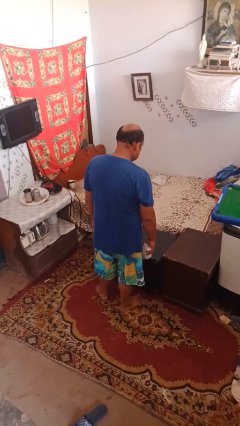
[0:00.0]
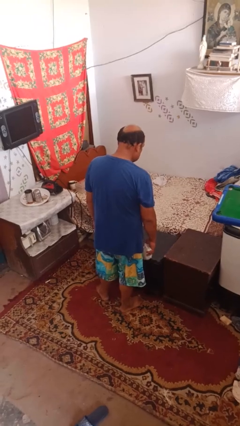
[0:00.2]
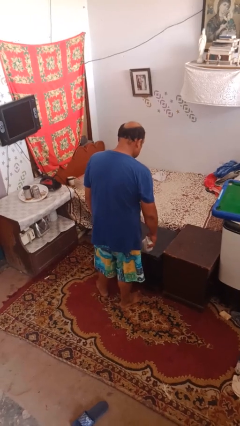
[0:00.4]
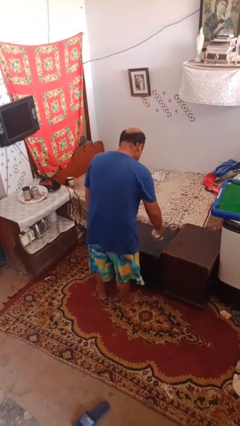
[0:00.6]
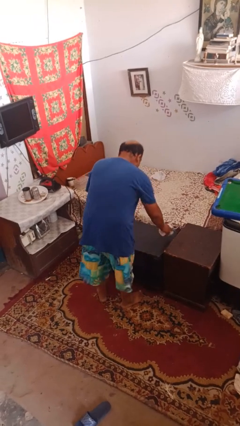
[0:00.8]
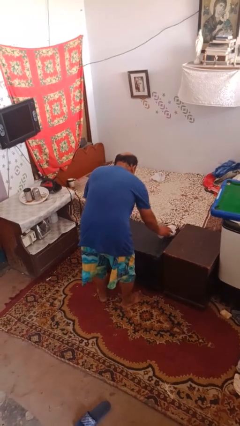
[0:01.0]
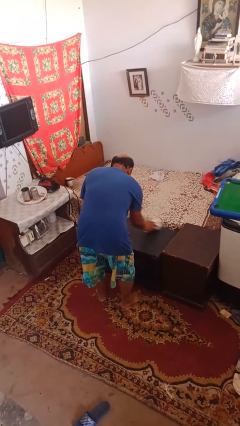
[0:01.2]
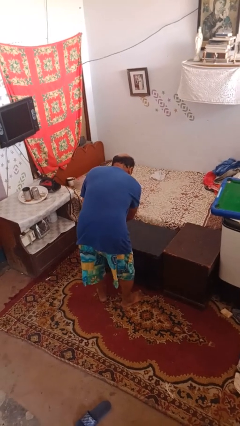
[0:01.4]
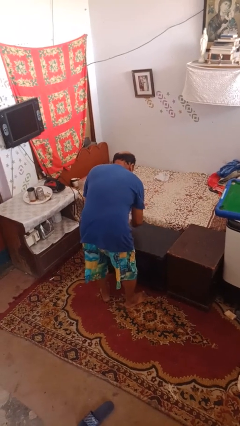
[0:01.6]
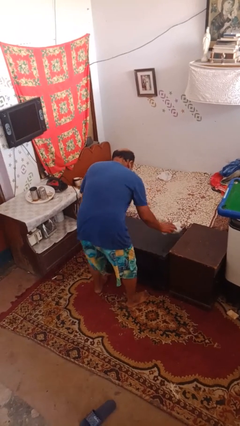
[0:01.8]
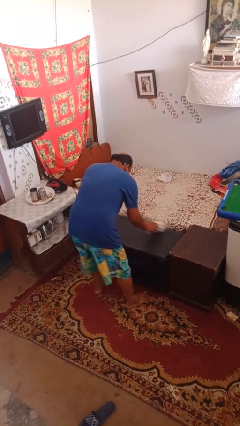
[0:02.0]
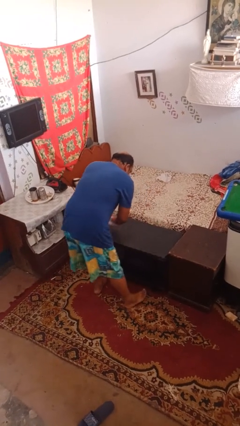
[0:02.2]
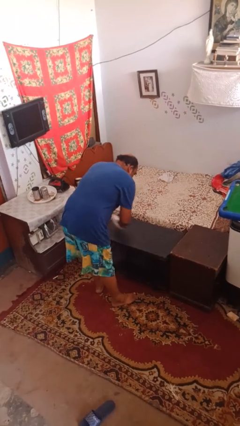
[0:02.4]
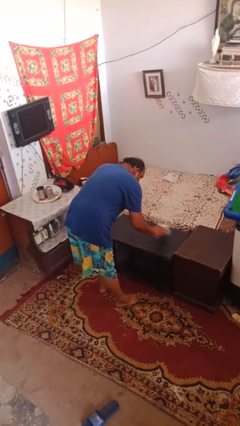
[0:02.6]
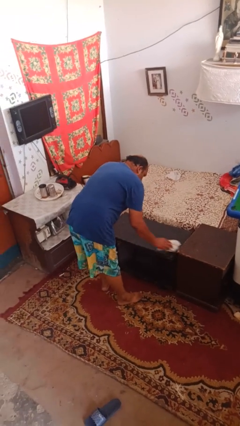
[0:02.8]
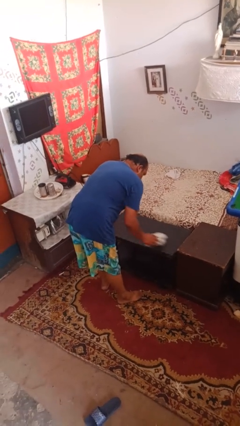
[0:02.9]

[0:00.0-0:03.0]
person dusts furniture

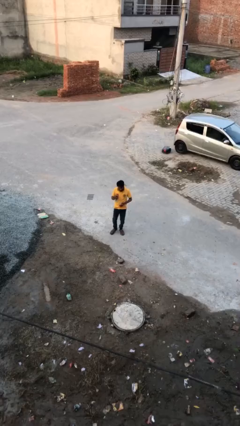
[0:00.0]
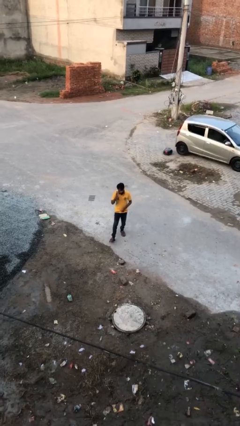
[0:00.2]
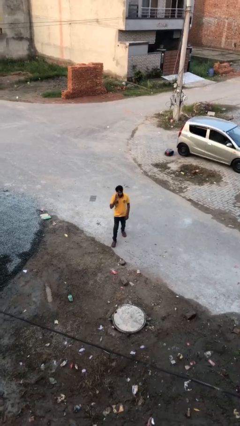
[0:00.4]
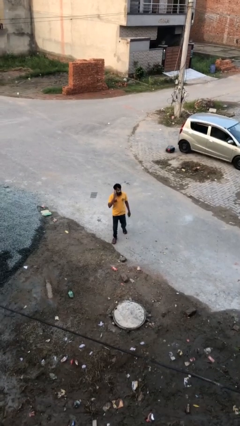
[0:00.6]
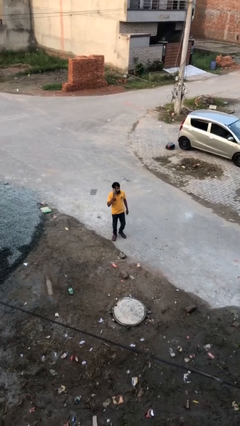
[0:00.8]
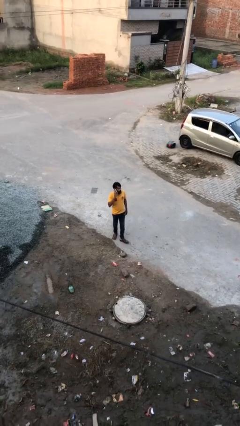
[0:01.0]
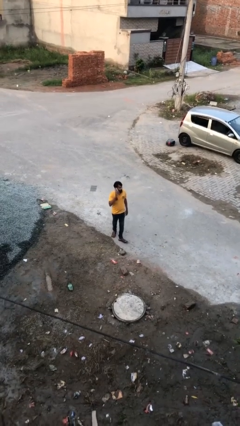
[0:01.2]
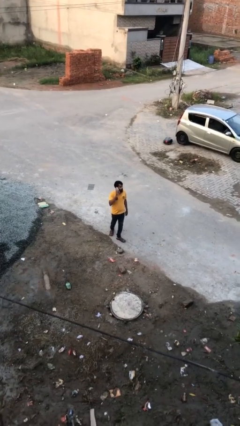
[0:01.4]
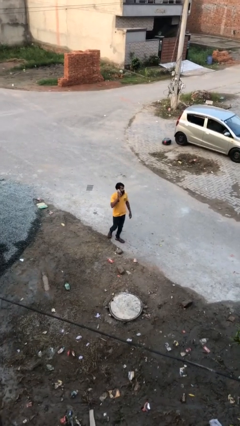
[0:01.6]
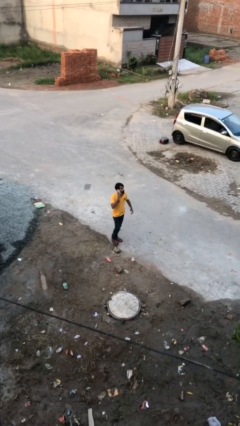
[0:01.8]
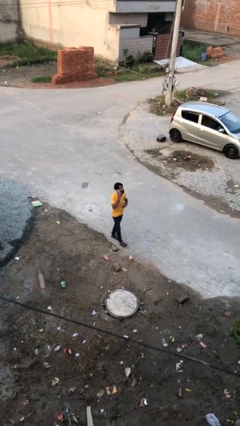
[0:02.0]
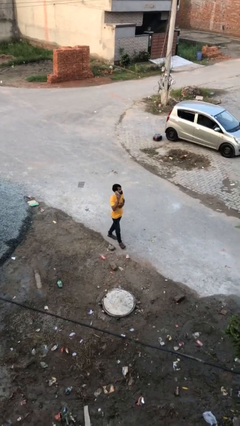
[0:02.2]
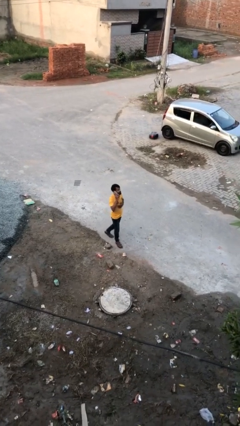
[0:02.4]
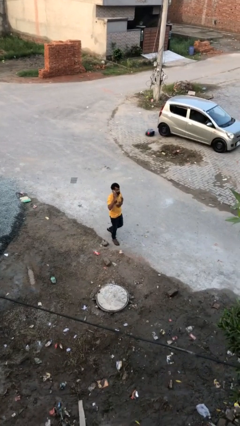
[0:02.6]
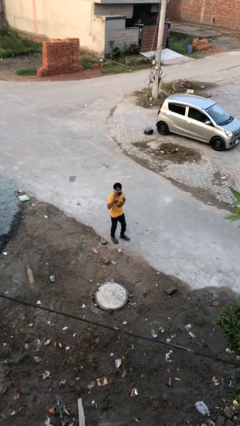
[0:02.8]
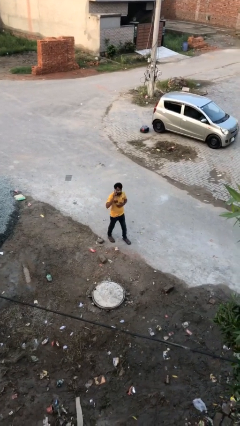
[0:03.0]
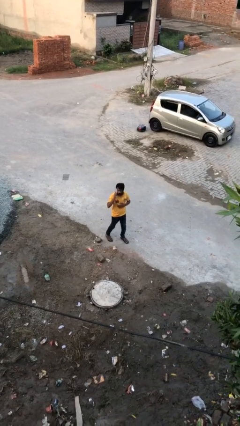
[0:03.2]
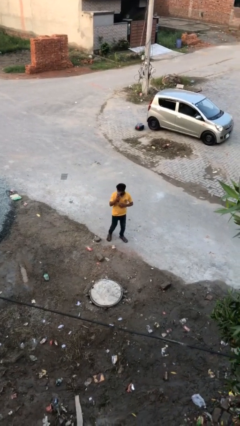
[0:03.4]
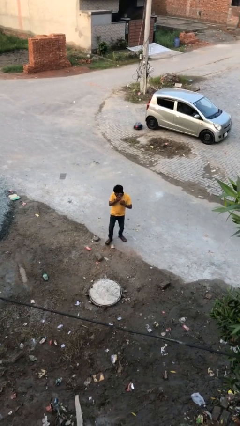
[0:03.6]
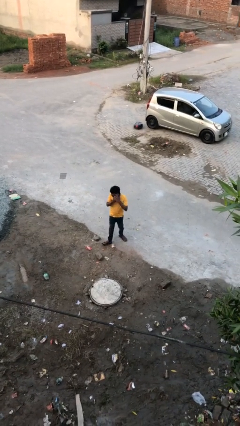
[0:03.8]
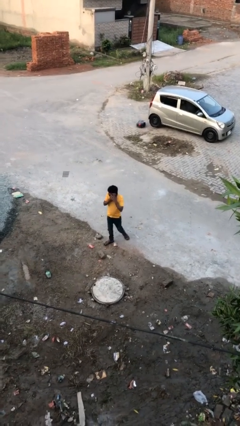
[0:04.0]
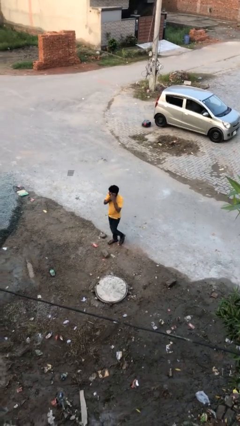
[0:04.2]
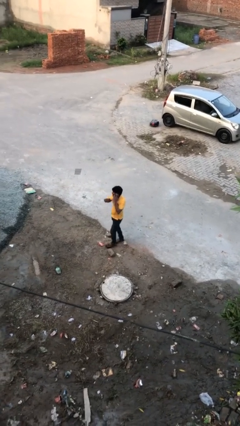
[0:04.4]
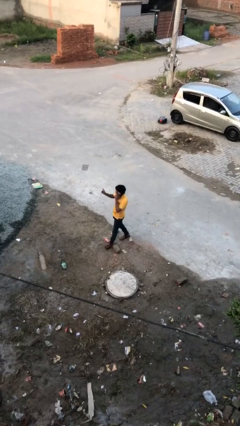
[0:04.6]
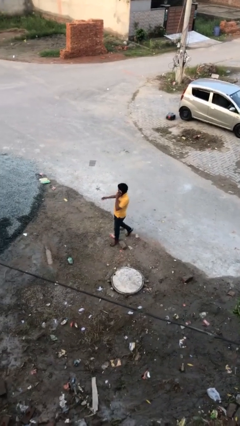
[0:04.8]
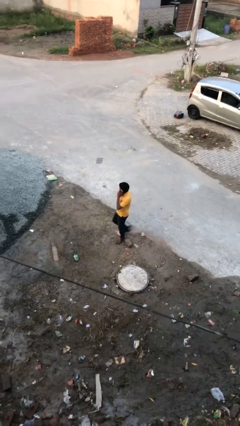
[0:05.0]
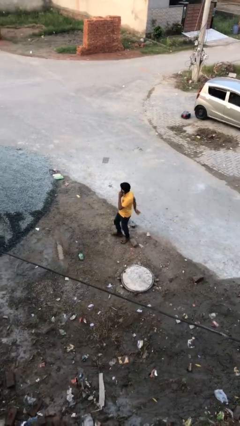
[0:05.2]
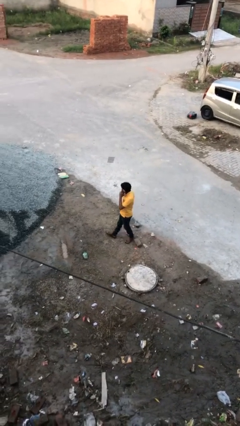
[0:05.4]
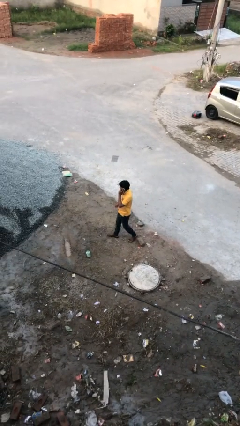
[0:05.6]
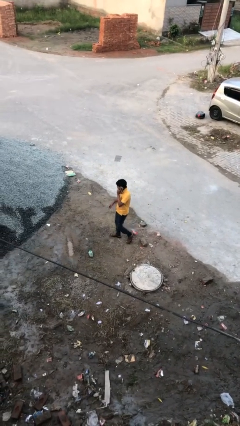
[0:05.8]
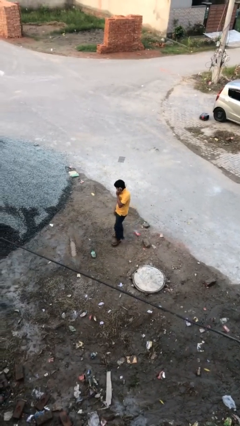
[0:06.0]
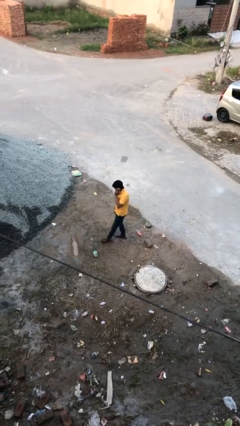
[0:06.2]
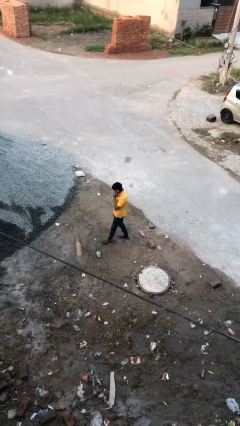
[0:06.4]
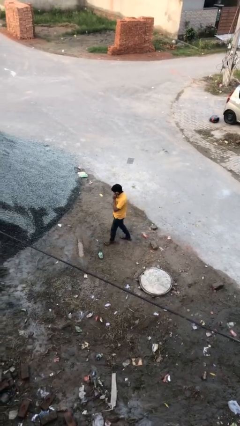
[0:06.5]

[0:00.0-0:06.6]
person talks on phone

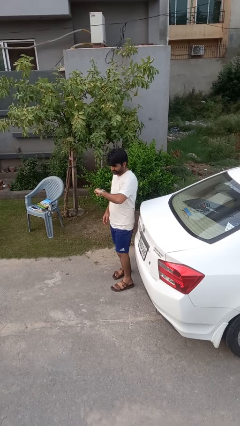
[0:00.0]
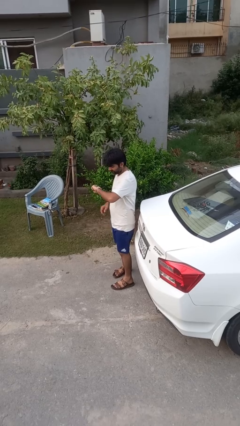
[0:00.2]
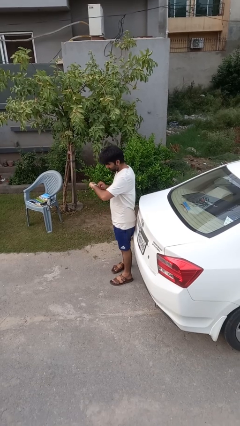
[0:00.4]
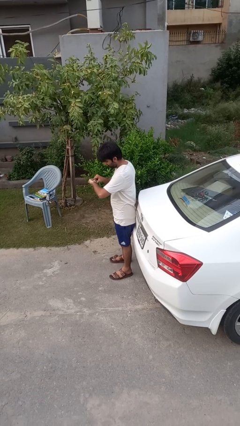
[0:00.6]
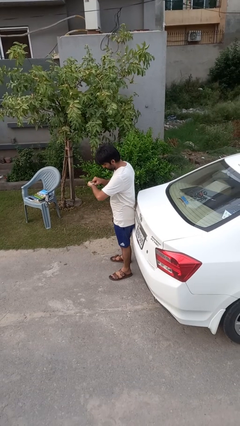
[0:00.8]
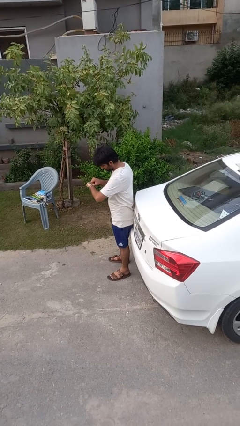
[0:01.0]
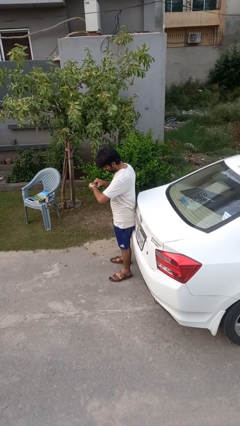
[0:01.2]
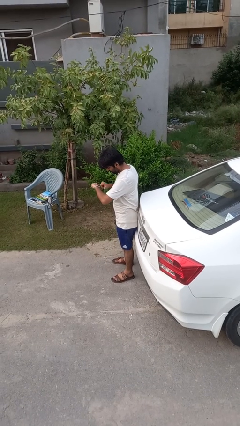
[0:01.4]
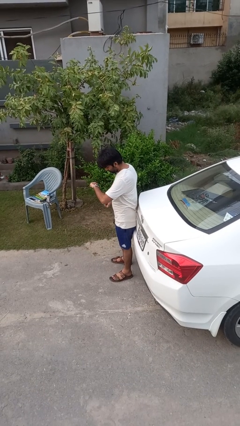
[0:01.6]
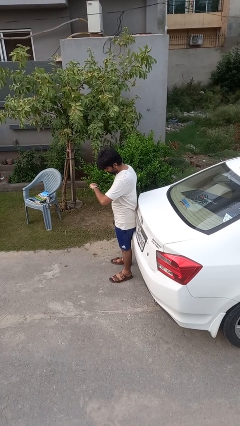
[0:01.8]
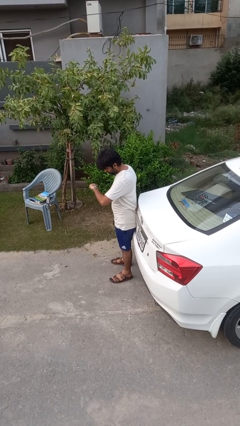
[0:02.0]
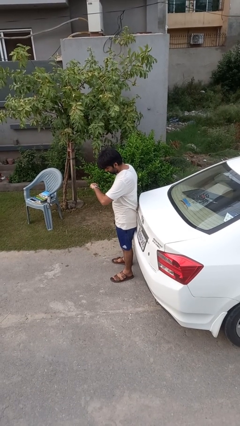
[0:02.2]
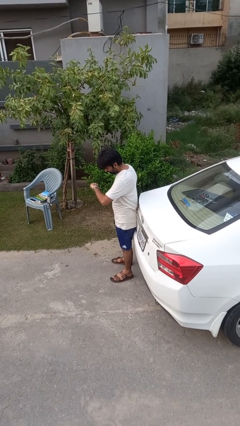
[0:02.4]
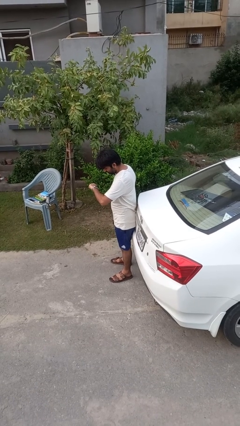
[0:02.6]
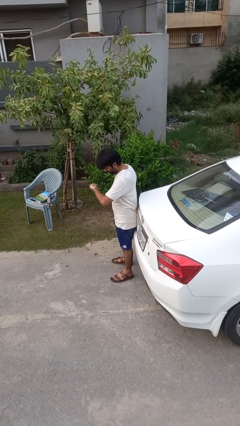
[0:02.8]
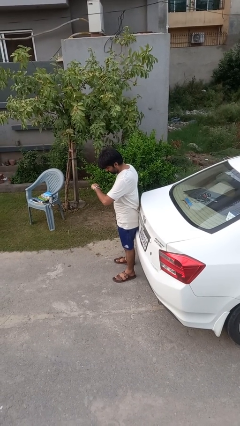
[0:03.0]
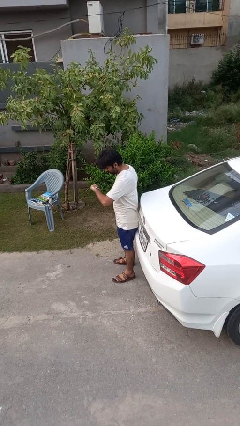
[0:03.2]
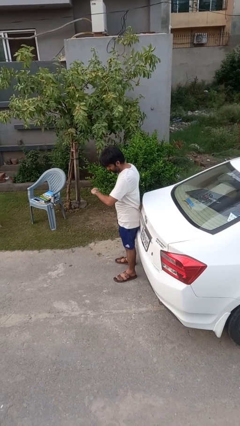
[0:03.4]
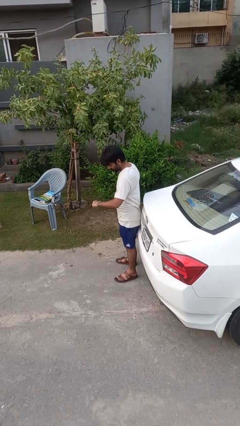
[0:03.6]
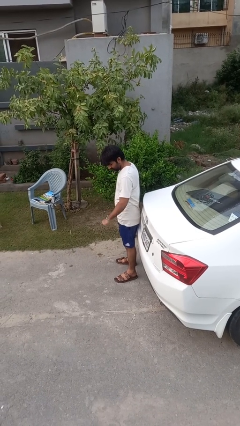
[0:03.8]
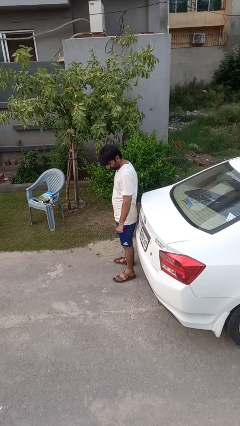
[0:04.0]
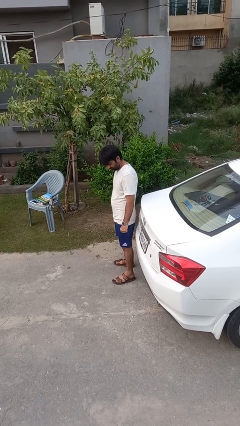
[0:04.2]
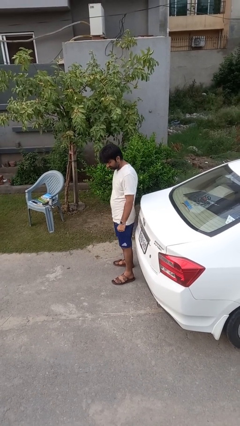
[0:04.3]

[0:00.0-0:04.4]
person looks at wristwatch

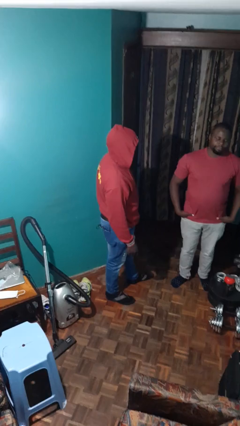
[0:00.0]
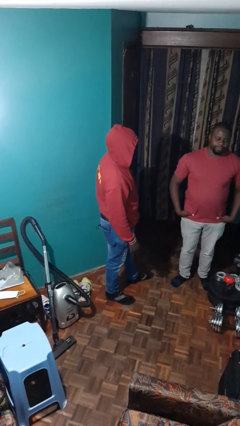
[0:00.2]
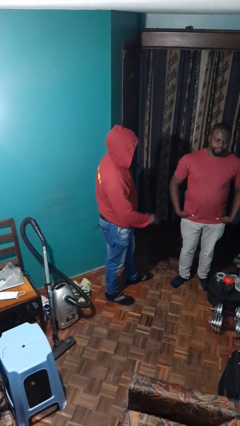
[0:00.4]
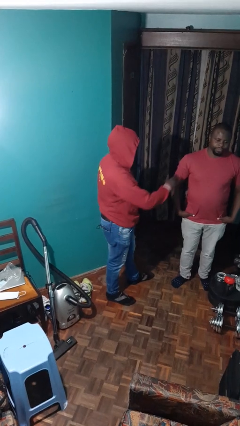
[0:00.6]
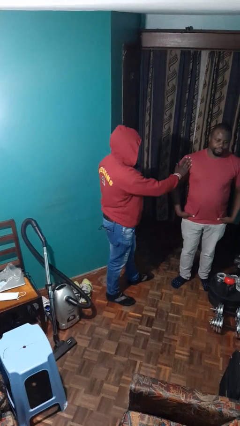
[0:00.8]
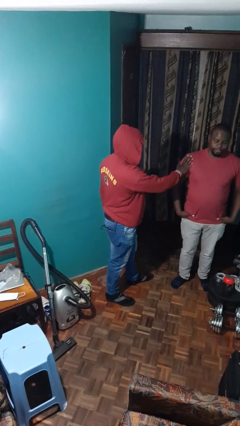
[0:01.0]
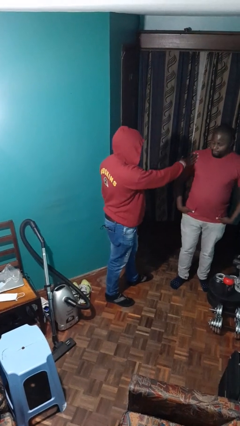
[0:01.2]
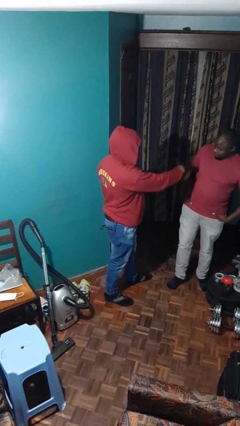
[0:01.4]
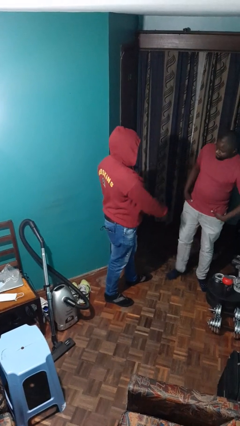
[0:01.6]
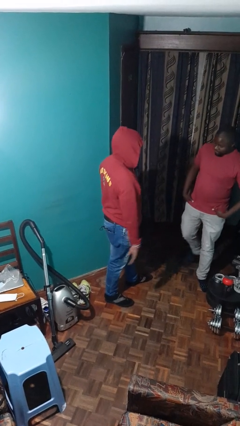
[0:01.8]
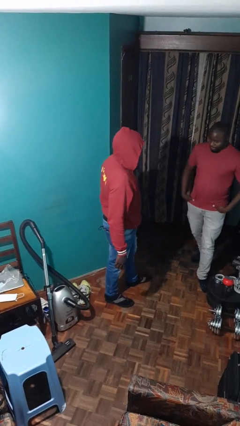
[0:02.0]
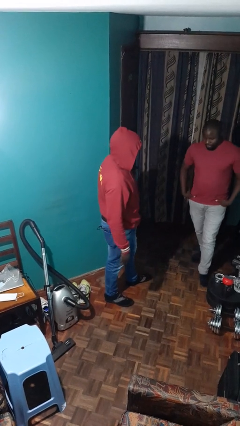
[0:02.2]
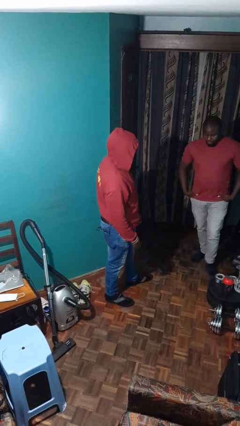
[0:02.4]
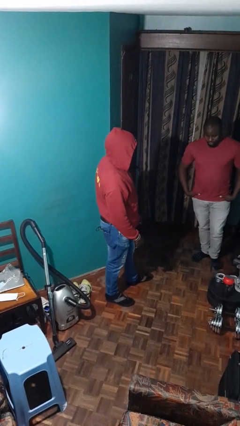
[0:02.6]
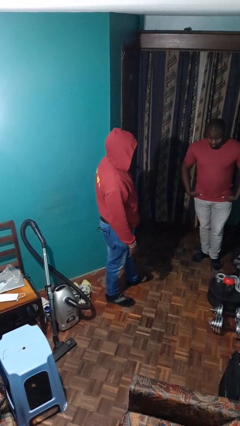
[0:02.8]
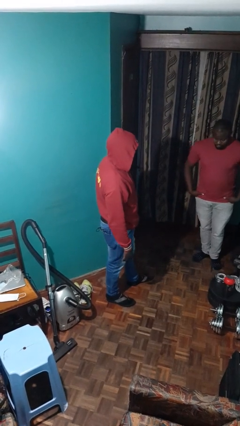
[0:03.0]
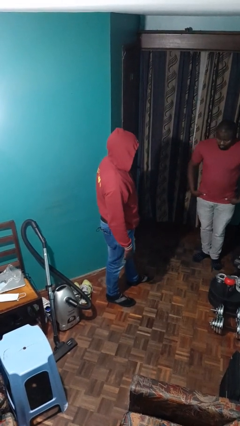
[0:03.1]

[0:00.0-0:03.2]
person shoves person

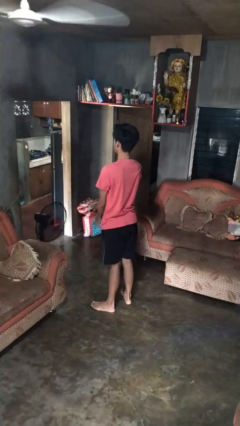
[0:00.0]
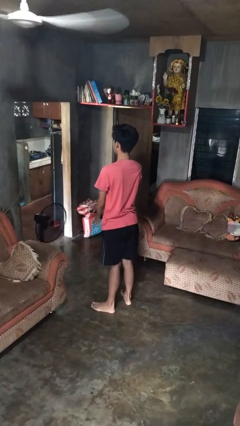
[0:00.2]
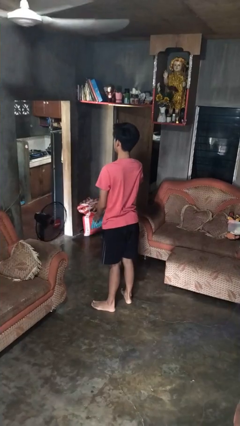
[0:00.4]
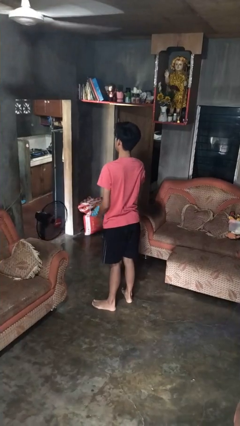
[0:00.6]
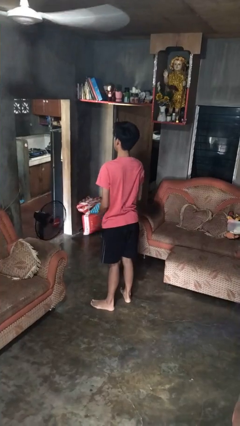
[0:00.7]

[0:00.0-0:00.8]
person catches dropped object
